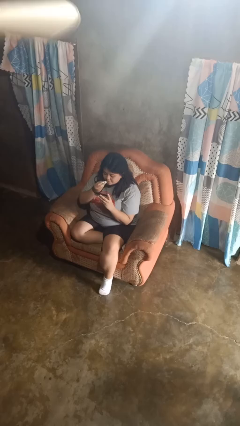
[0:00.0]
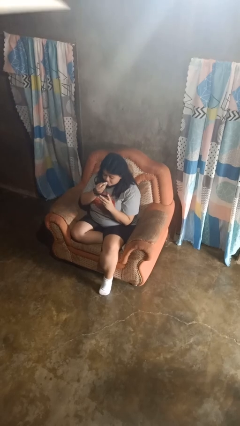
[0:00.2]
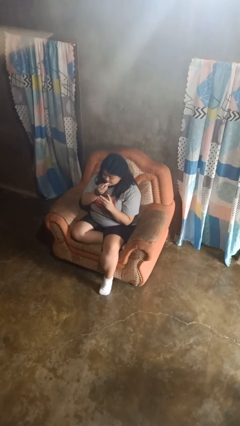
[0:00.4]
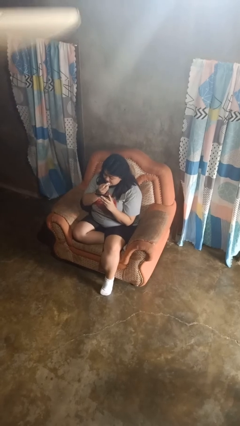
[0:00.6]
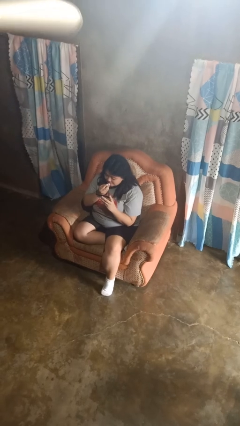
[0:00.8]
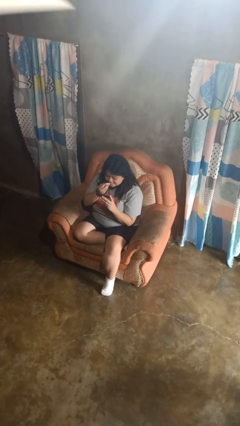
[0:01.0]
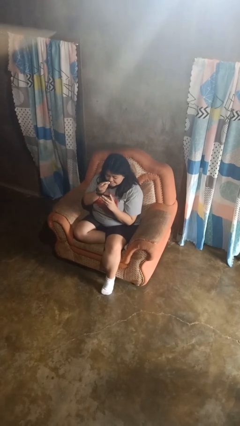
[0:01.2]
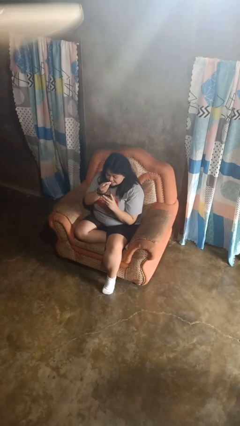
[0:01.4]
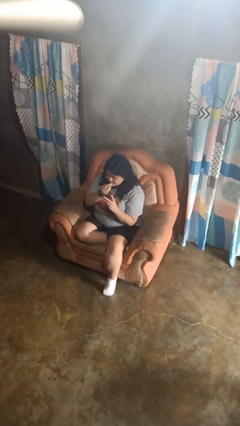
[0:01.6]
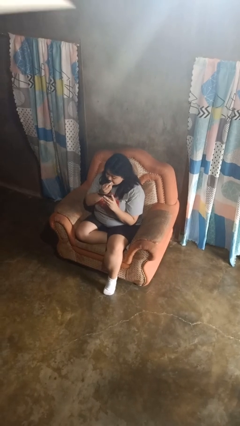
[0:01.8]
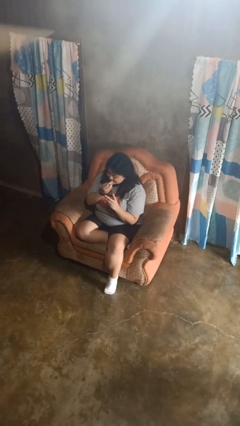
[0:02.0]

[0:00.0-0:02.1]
person applies lip makeup

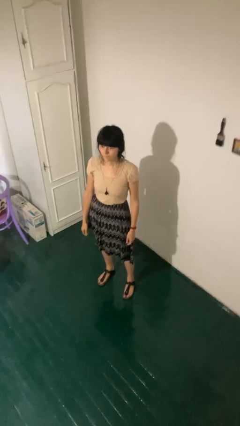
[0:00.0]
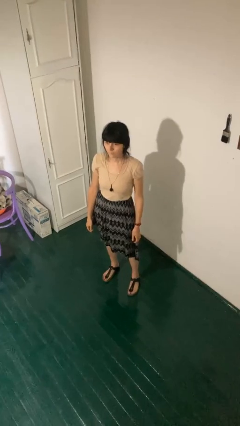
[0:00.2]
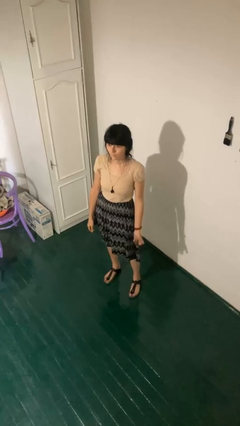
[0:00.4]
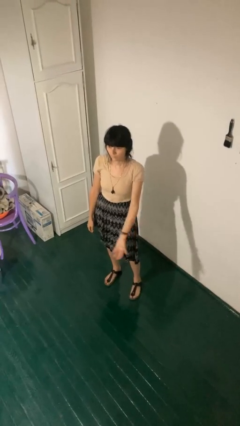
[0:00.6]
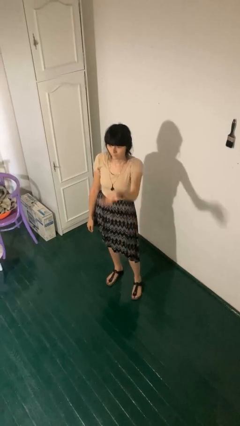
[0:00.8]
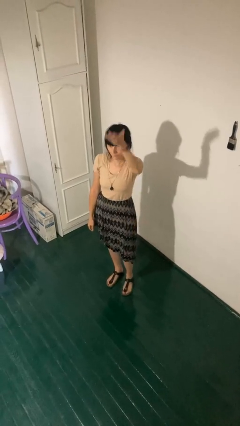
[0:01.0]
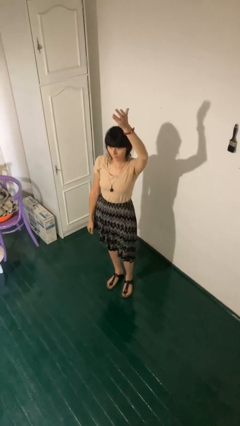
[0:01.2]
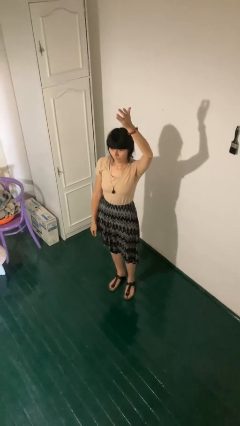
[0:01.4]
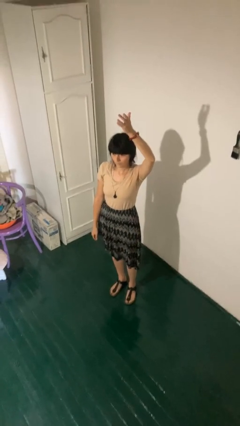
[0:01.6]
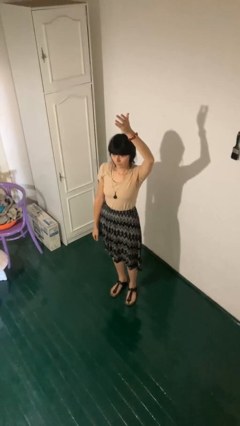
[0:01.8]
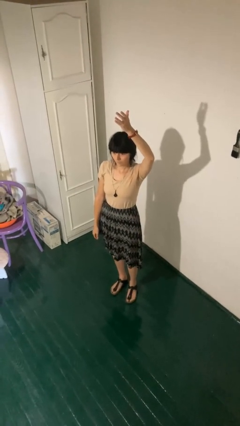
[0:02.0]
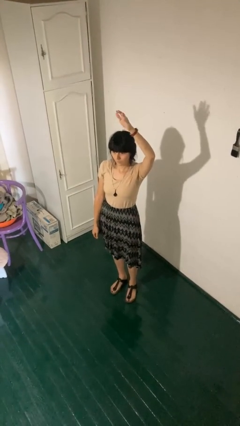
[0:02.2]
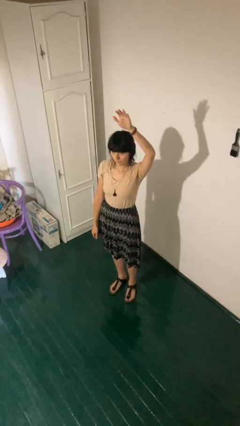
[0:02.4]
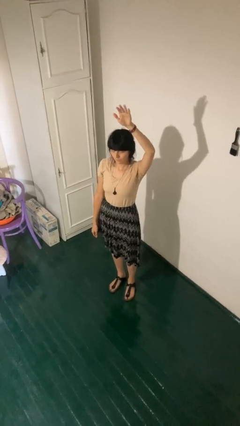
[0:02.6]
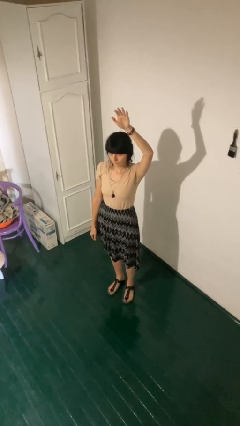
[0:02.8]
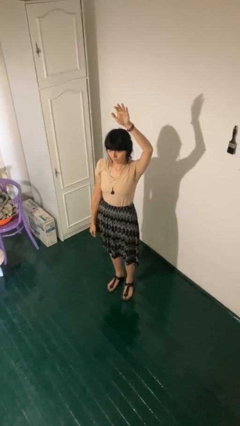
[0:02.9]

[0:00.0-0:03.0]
person gestures swipe up

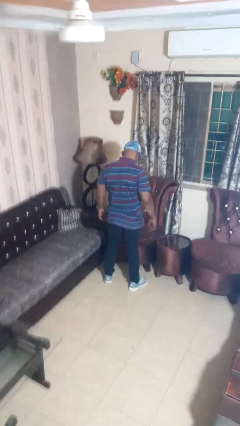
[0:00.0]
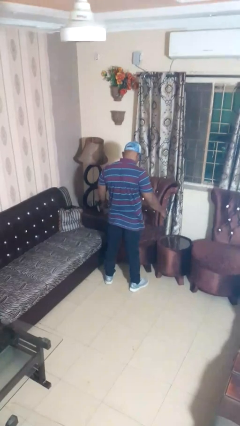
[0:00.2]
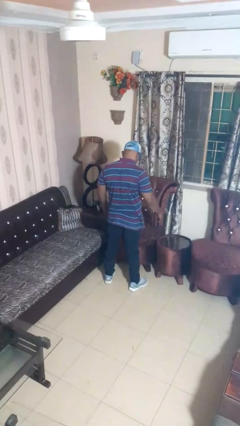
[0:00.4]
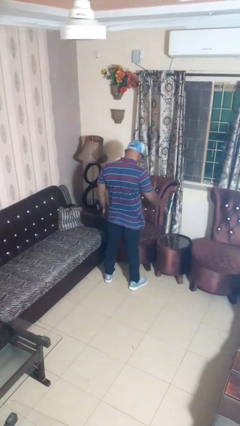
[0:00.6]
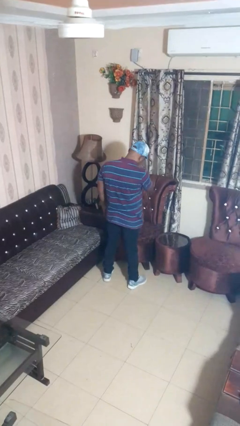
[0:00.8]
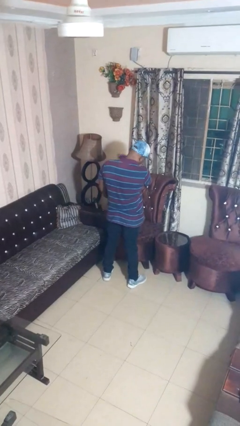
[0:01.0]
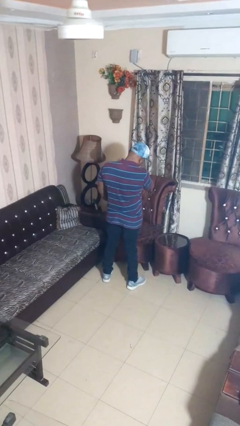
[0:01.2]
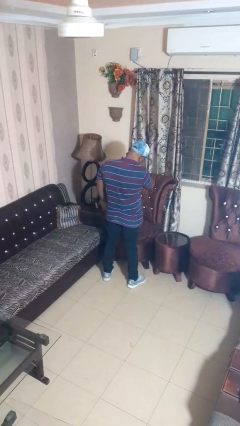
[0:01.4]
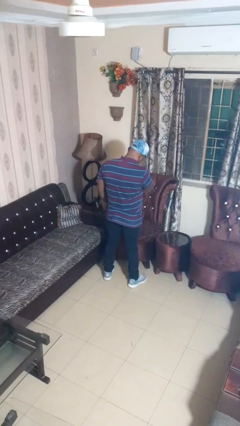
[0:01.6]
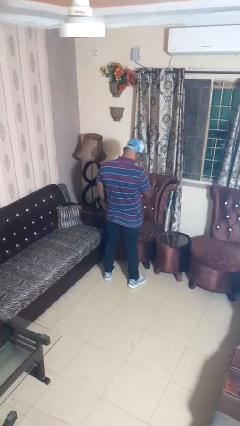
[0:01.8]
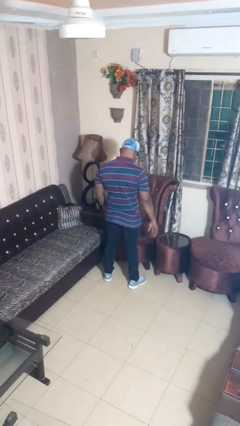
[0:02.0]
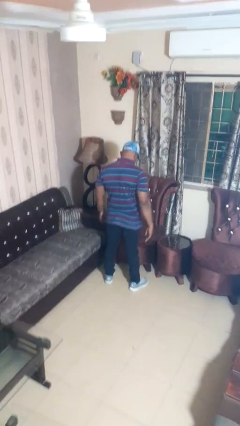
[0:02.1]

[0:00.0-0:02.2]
person drums on chest

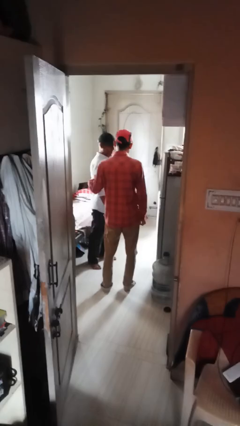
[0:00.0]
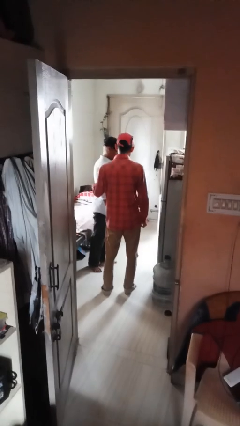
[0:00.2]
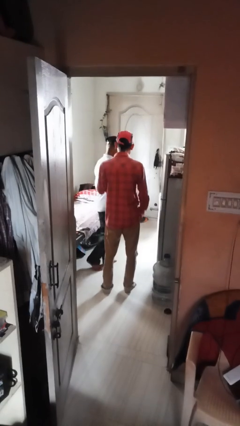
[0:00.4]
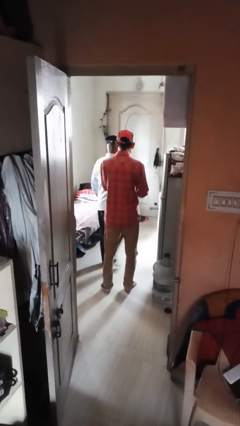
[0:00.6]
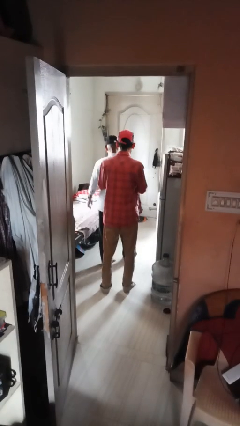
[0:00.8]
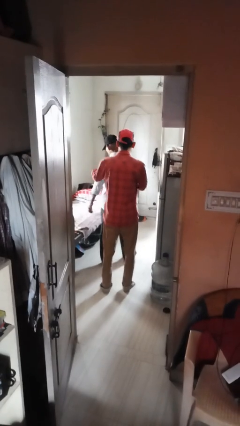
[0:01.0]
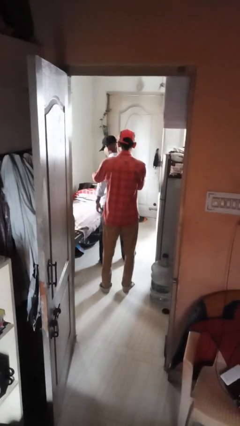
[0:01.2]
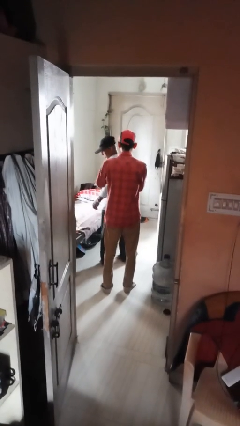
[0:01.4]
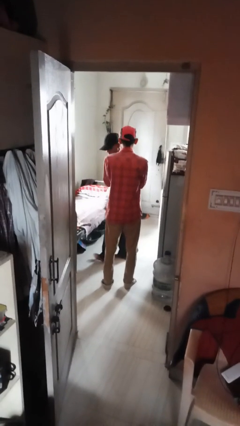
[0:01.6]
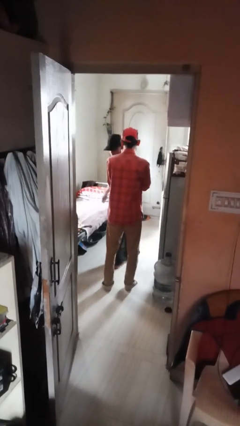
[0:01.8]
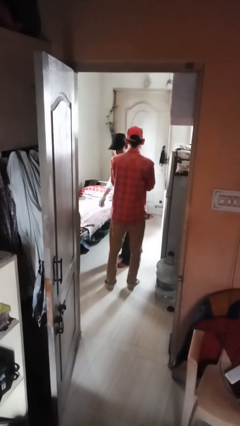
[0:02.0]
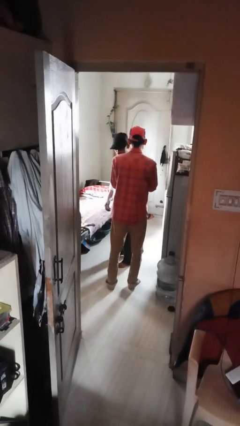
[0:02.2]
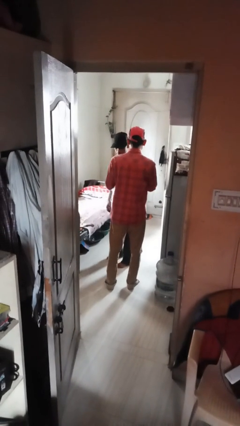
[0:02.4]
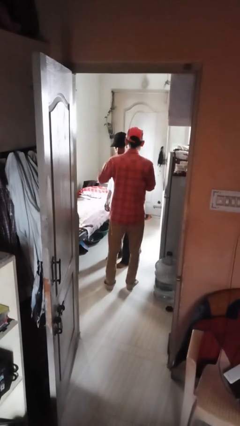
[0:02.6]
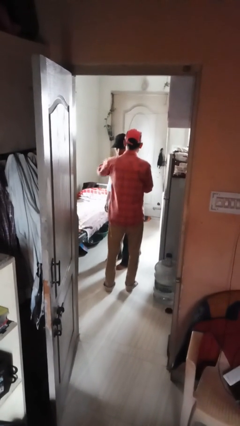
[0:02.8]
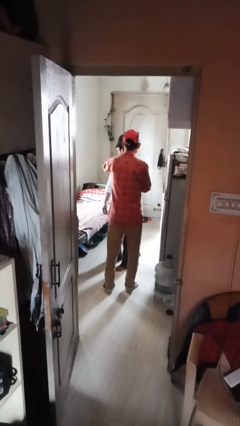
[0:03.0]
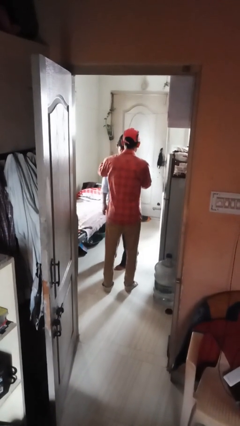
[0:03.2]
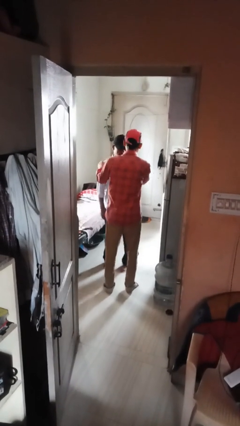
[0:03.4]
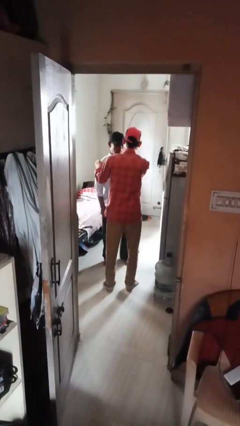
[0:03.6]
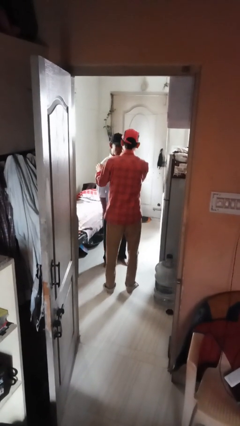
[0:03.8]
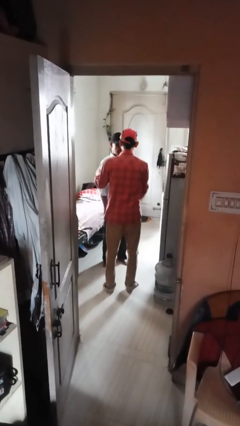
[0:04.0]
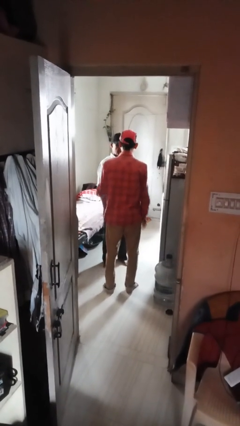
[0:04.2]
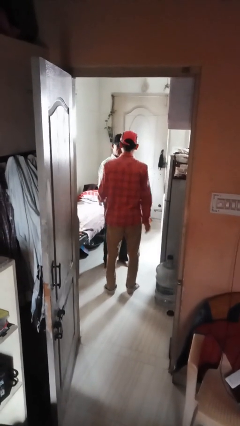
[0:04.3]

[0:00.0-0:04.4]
person spins person around

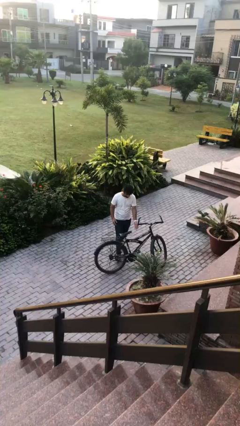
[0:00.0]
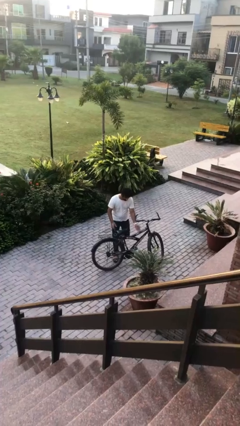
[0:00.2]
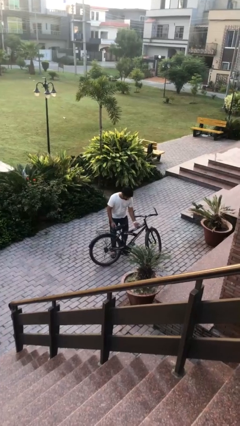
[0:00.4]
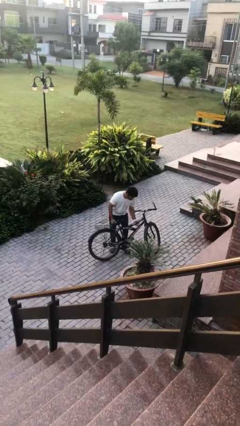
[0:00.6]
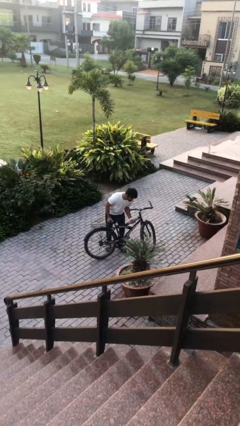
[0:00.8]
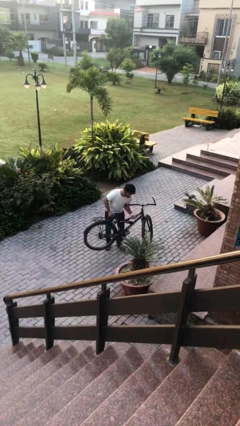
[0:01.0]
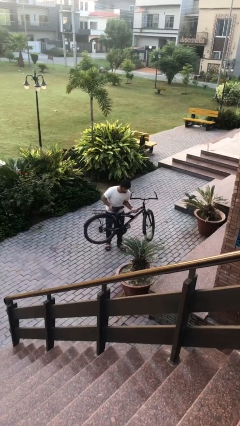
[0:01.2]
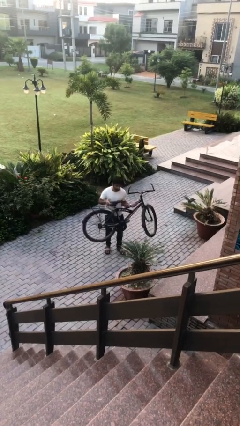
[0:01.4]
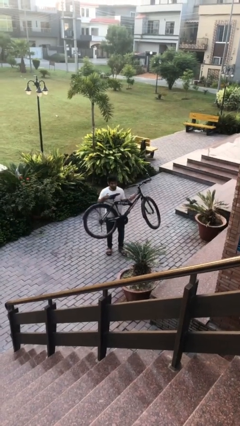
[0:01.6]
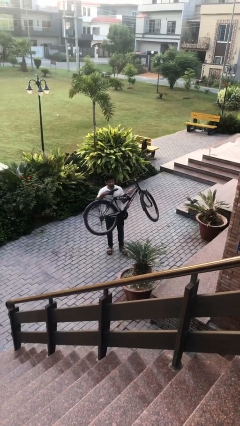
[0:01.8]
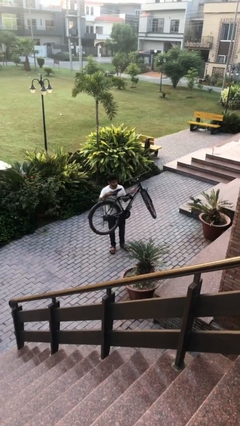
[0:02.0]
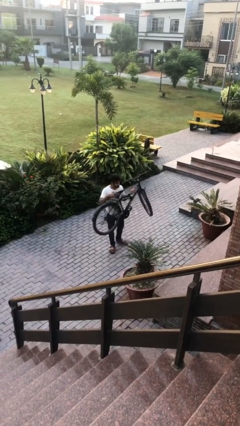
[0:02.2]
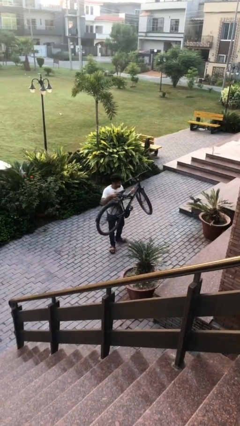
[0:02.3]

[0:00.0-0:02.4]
person picks up object from floor

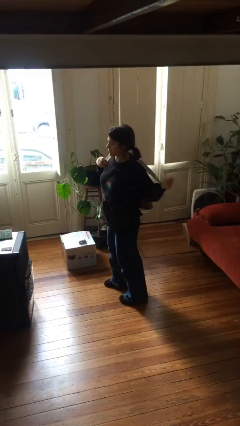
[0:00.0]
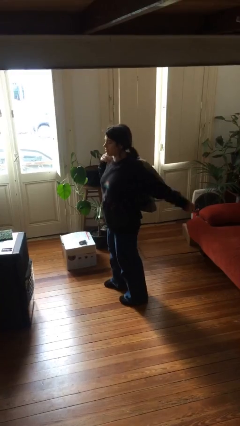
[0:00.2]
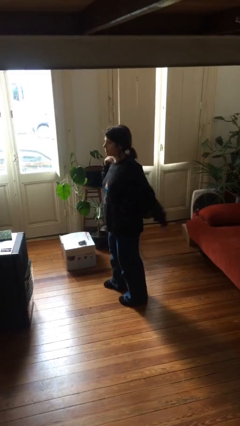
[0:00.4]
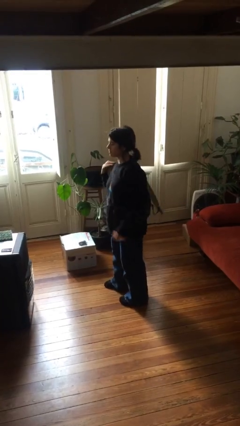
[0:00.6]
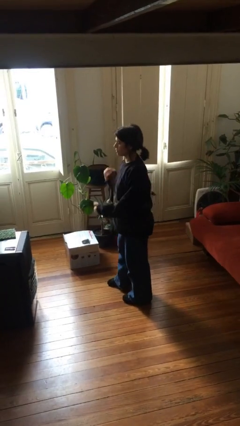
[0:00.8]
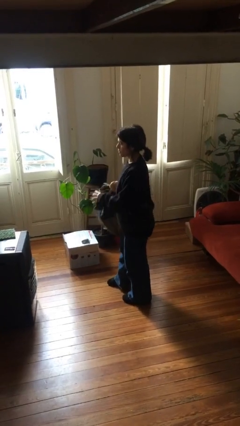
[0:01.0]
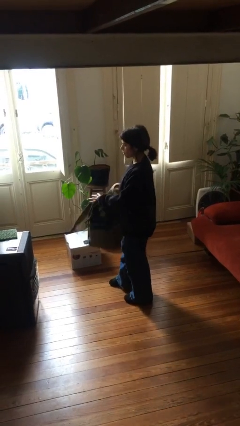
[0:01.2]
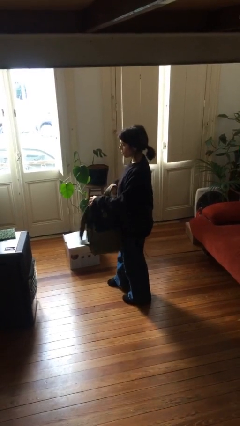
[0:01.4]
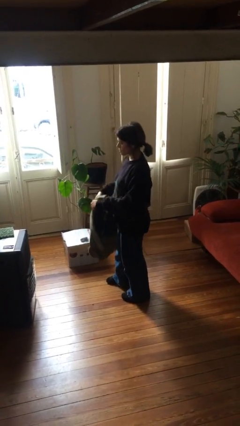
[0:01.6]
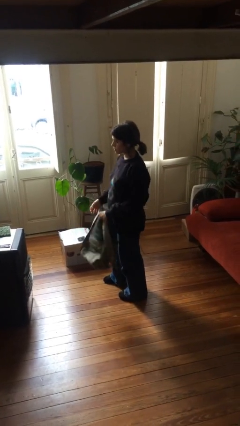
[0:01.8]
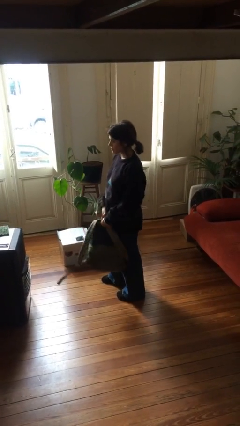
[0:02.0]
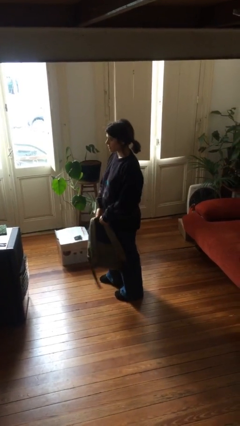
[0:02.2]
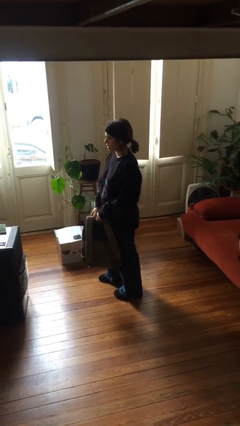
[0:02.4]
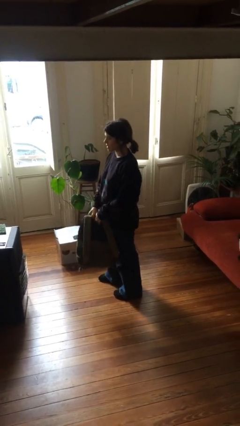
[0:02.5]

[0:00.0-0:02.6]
person takes off backpack

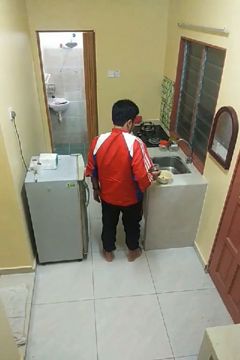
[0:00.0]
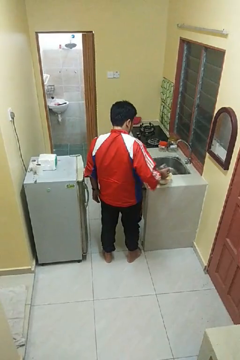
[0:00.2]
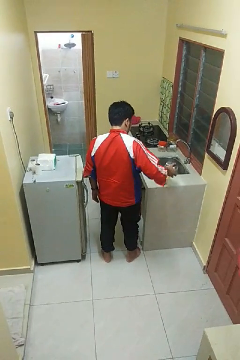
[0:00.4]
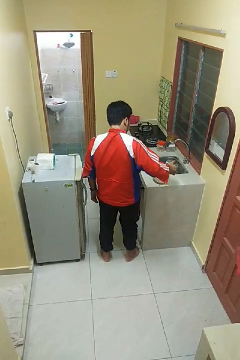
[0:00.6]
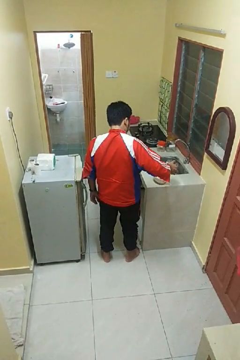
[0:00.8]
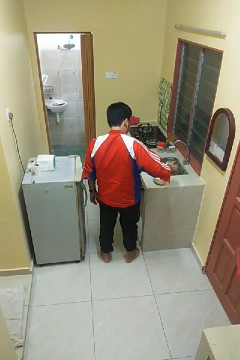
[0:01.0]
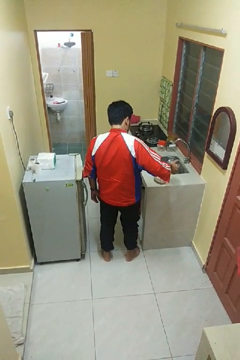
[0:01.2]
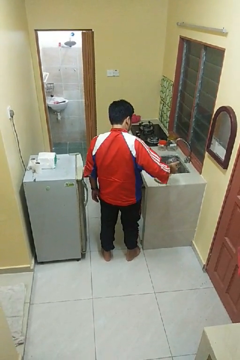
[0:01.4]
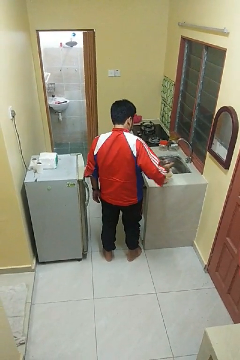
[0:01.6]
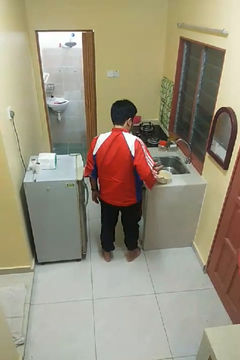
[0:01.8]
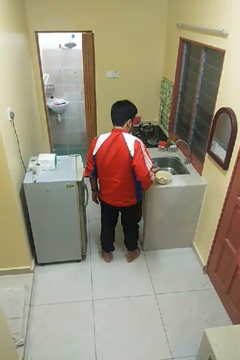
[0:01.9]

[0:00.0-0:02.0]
person pours into bowl
